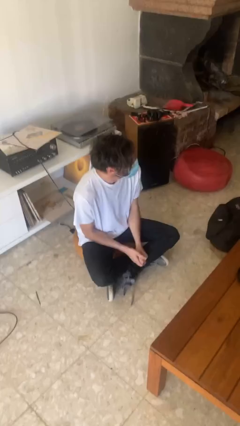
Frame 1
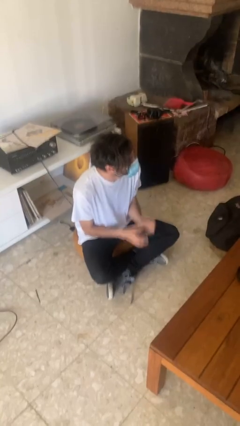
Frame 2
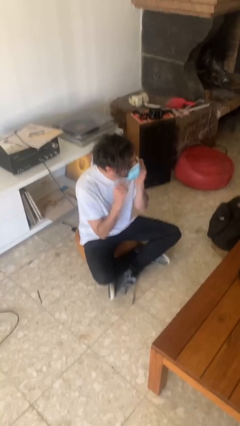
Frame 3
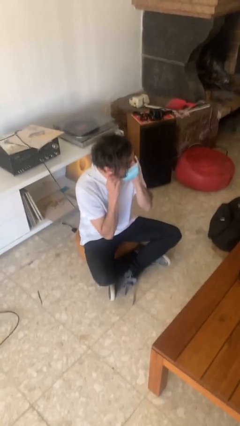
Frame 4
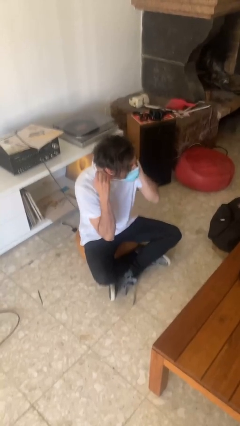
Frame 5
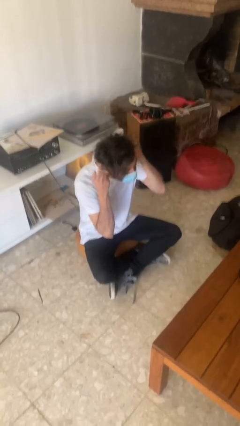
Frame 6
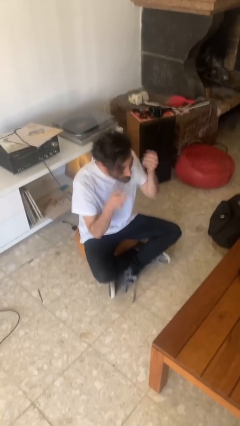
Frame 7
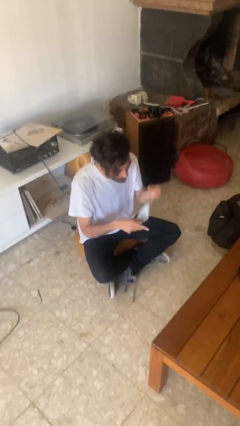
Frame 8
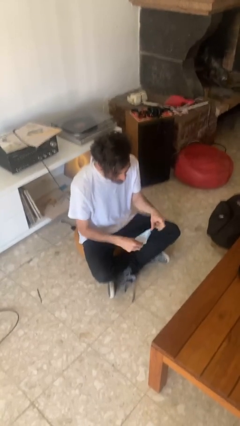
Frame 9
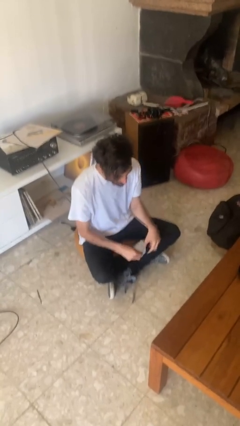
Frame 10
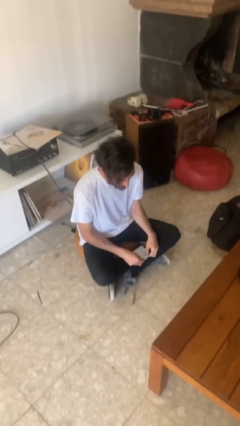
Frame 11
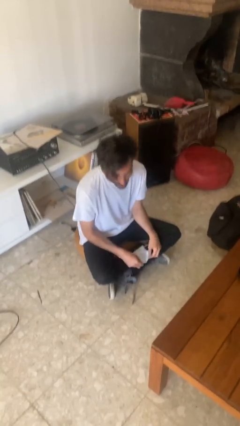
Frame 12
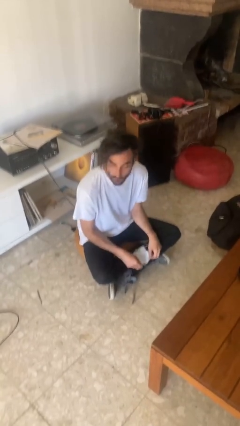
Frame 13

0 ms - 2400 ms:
person takes off facemask

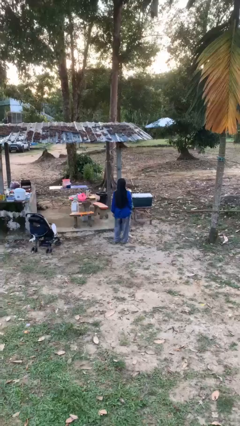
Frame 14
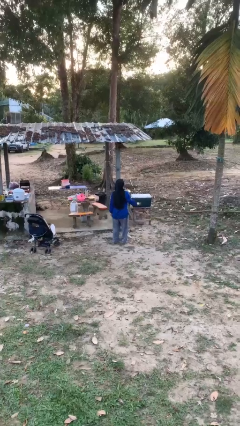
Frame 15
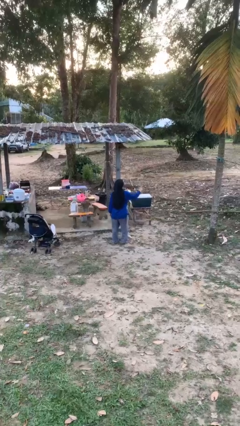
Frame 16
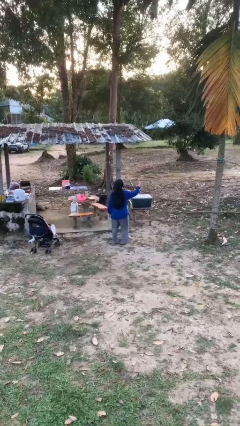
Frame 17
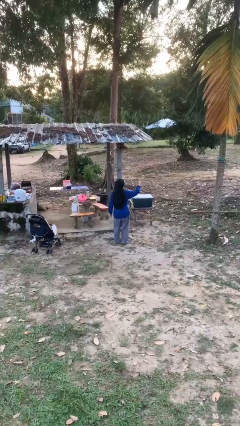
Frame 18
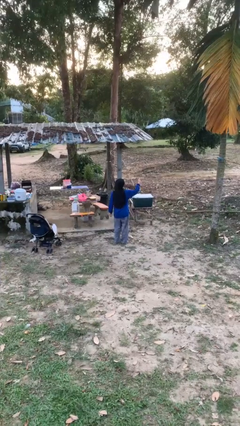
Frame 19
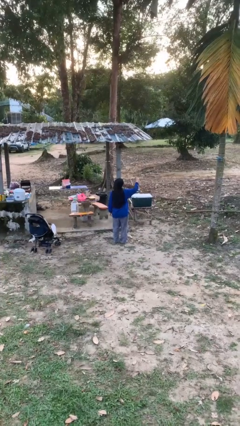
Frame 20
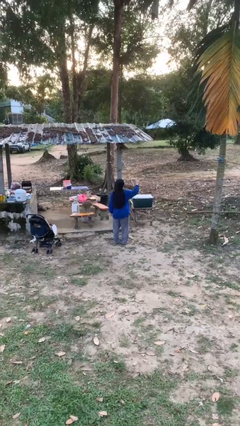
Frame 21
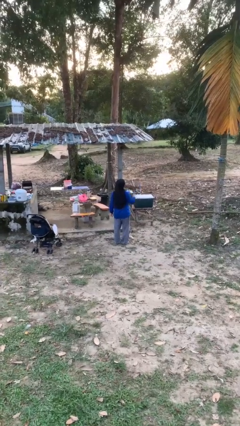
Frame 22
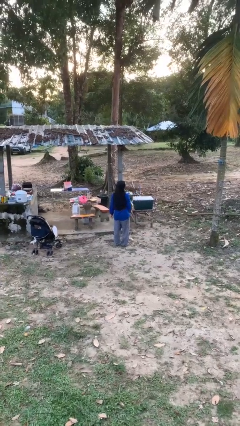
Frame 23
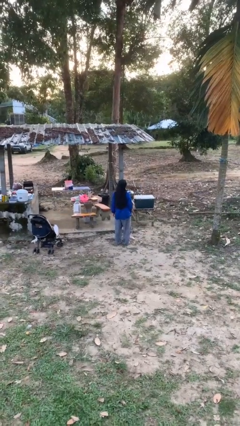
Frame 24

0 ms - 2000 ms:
person gestures number three

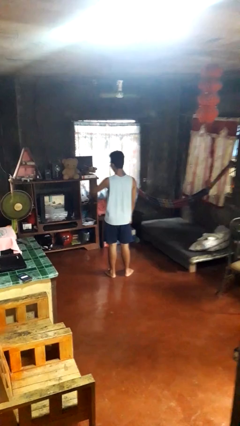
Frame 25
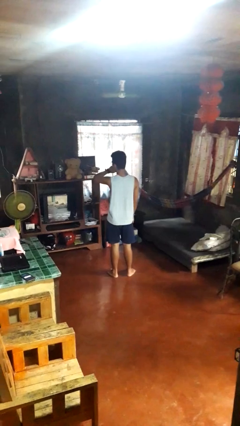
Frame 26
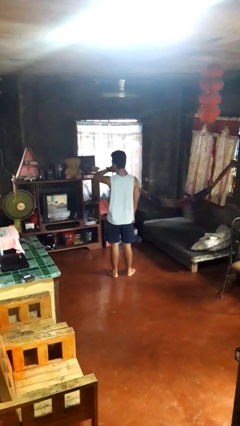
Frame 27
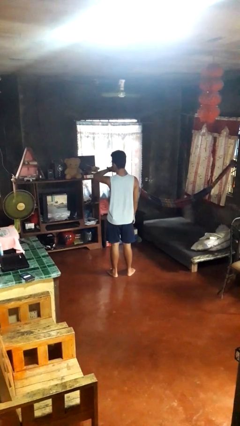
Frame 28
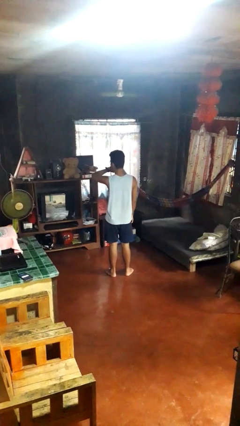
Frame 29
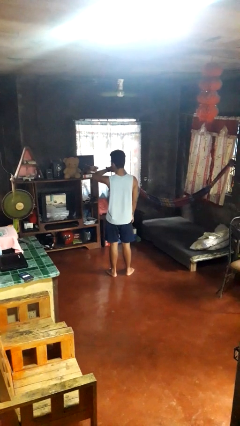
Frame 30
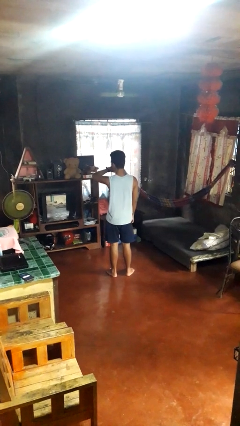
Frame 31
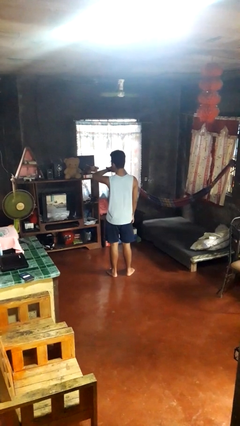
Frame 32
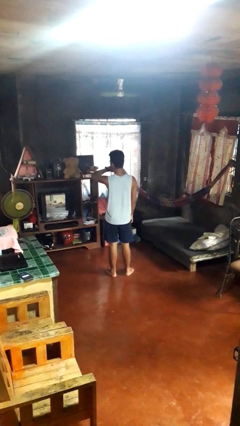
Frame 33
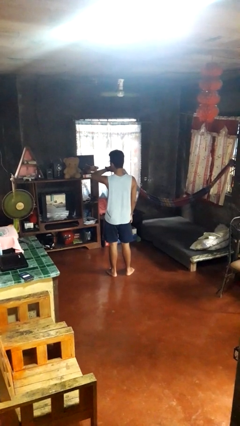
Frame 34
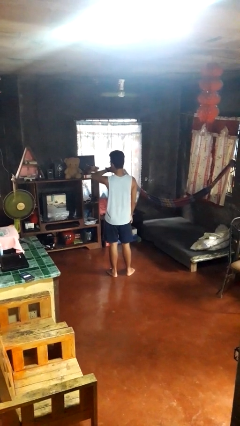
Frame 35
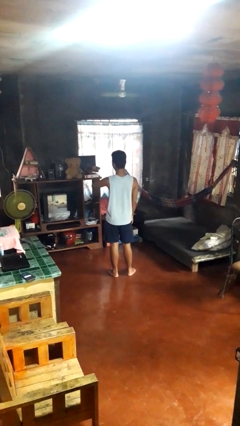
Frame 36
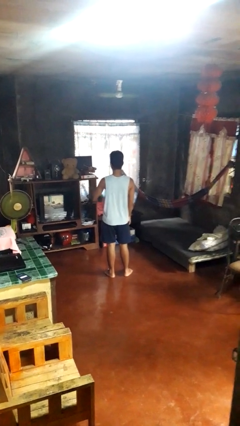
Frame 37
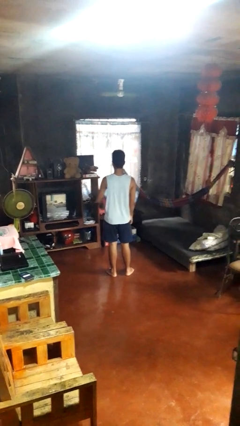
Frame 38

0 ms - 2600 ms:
person looks at wristwatch

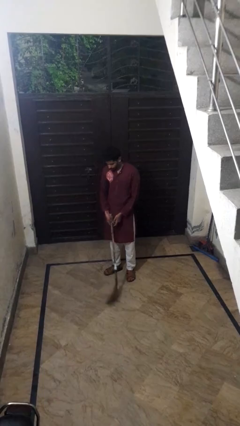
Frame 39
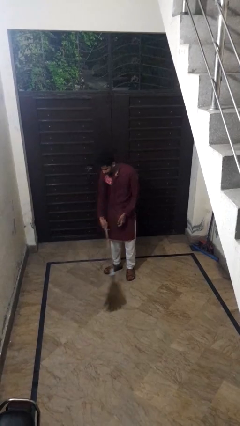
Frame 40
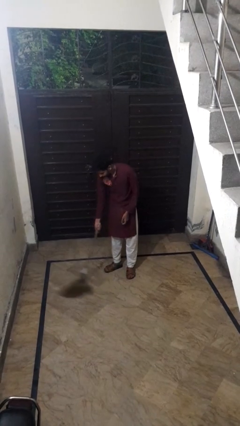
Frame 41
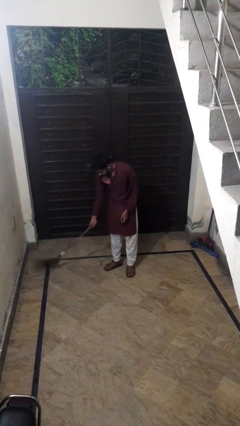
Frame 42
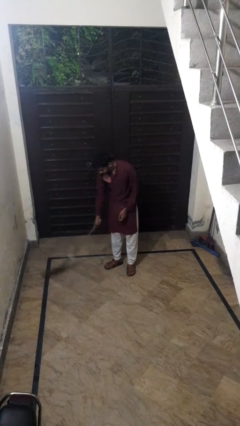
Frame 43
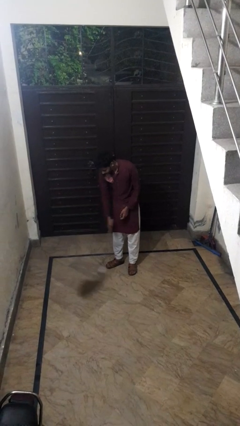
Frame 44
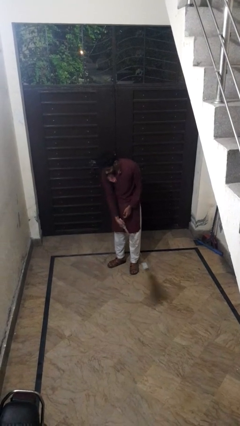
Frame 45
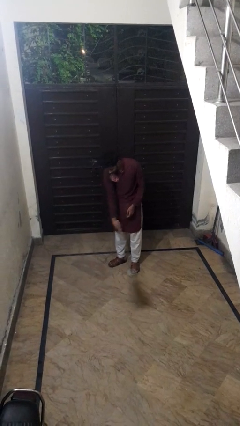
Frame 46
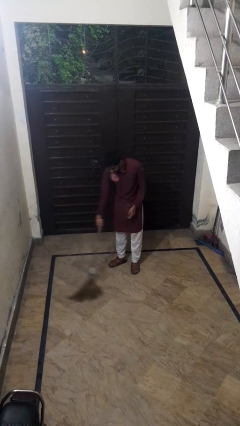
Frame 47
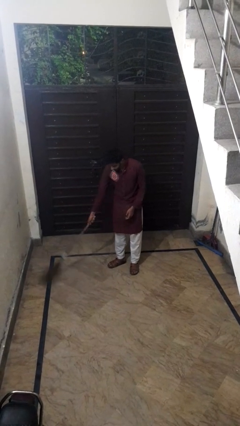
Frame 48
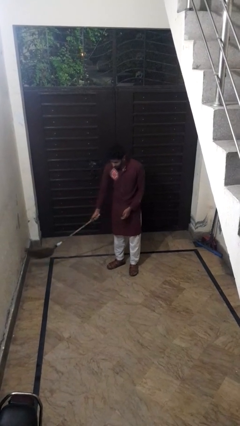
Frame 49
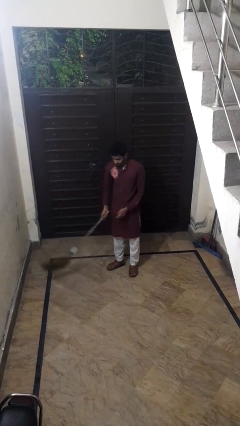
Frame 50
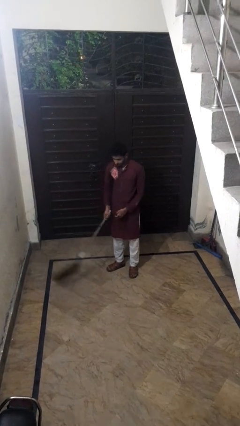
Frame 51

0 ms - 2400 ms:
person sweeps floor

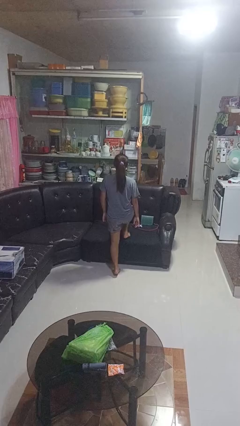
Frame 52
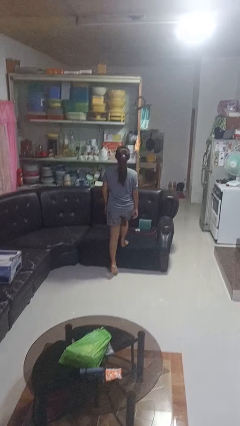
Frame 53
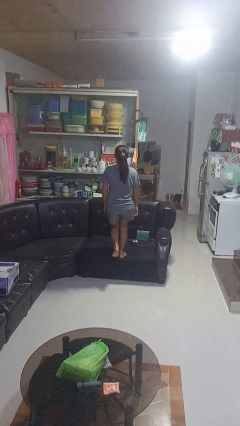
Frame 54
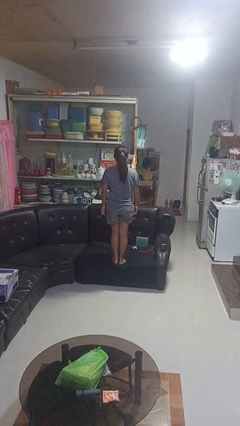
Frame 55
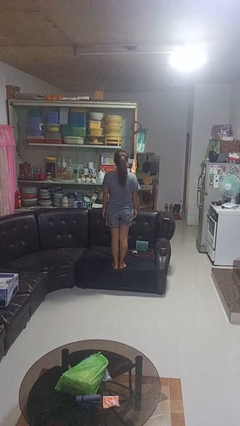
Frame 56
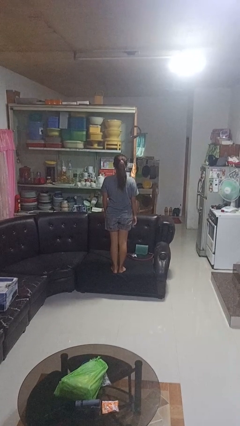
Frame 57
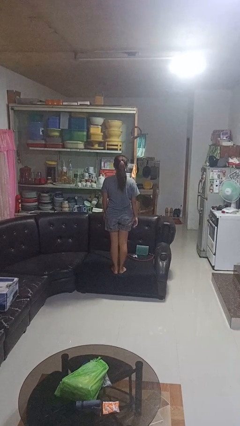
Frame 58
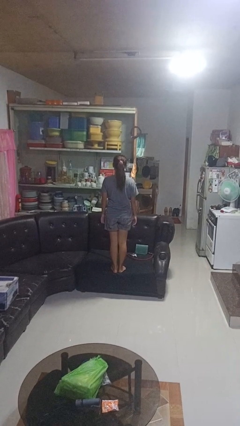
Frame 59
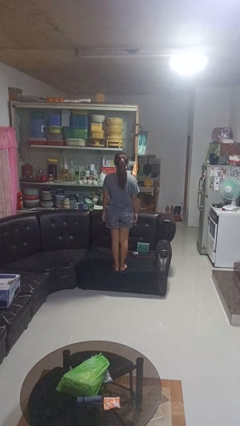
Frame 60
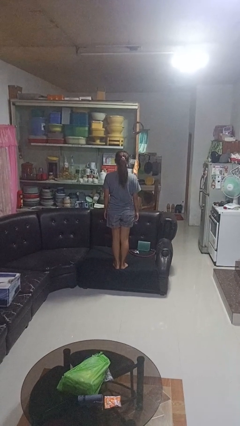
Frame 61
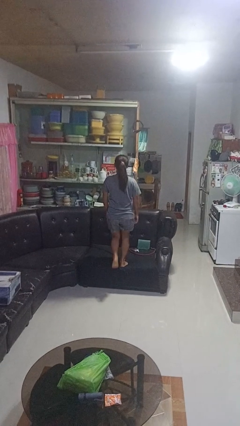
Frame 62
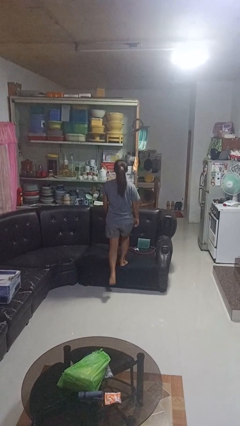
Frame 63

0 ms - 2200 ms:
person climbs on couch

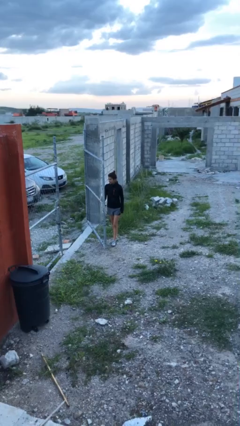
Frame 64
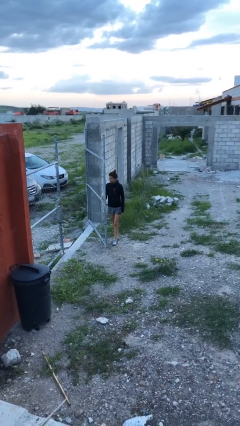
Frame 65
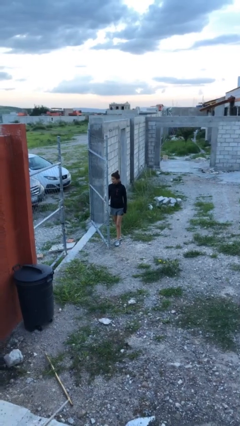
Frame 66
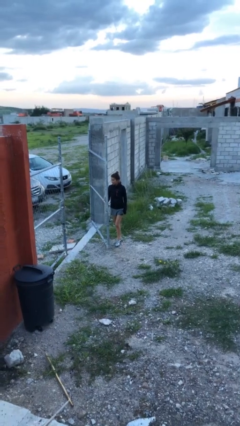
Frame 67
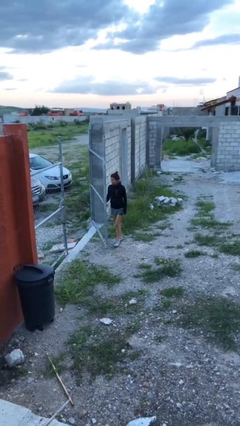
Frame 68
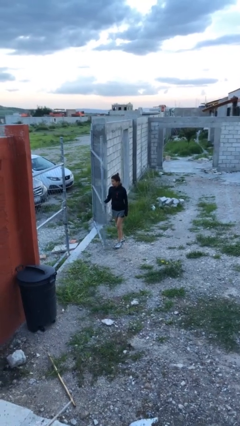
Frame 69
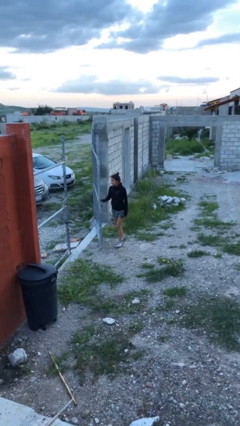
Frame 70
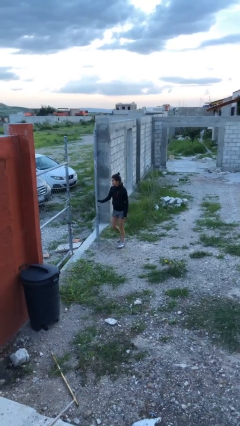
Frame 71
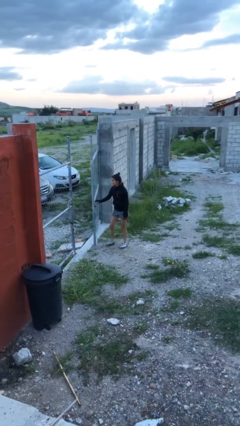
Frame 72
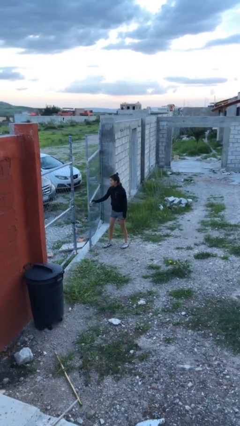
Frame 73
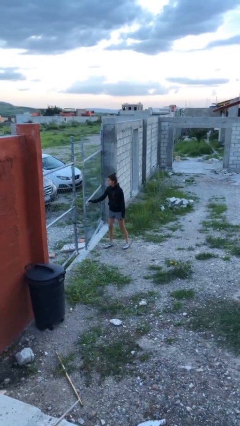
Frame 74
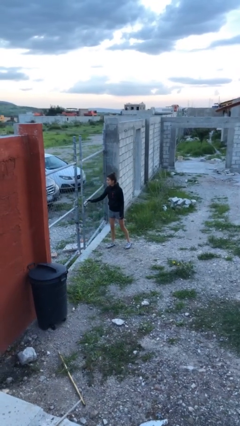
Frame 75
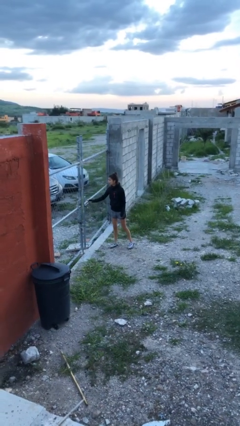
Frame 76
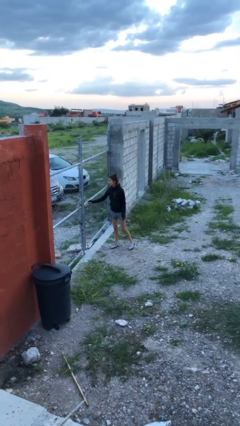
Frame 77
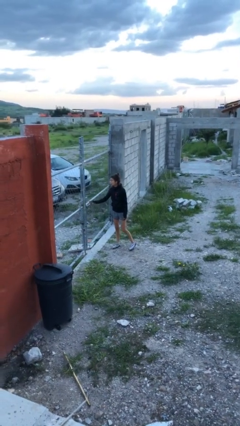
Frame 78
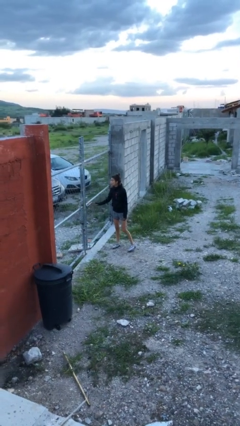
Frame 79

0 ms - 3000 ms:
person closes gate

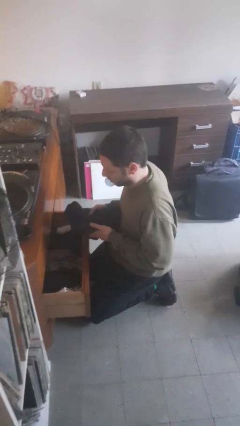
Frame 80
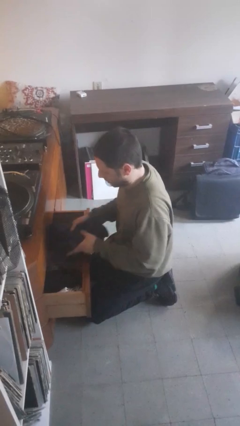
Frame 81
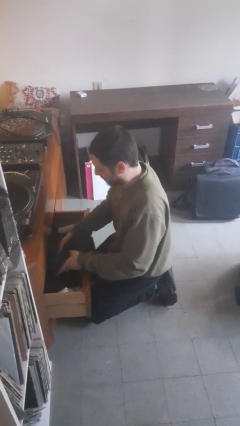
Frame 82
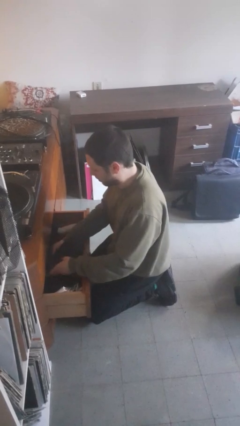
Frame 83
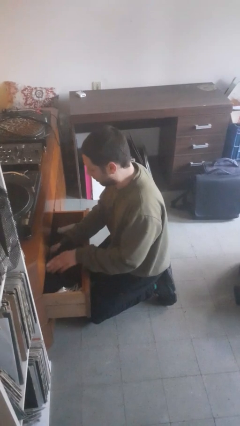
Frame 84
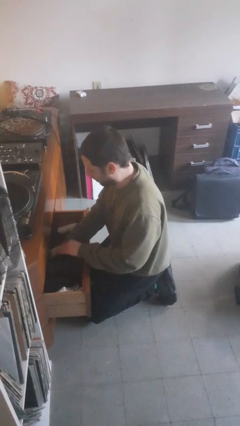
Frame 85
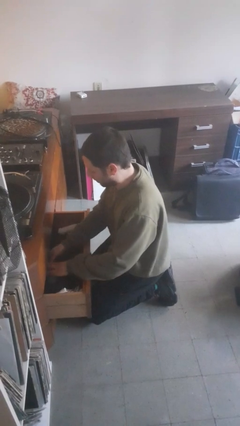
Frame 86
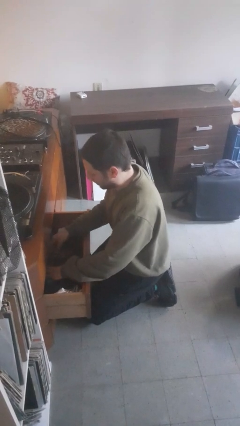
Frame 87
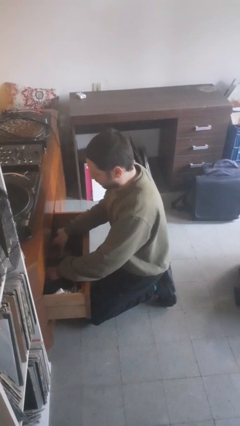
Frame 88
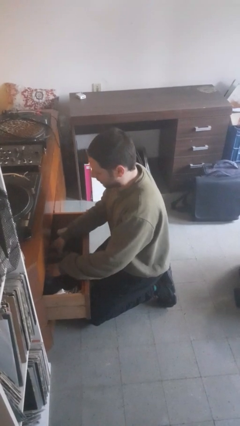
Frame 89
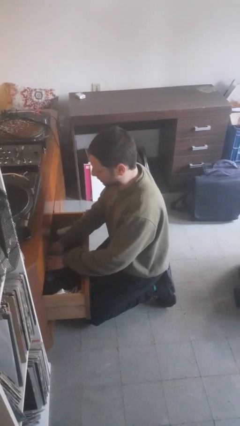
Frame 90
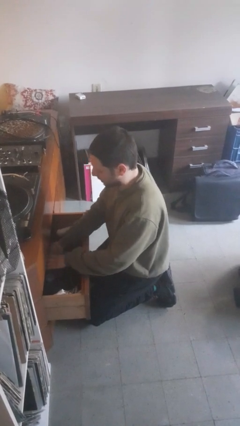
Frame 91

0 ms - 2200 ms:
person puts clothes into dresser
